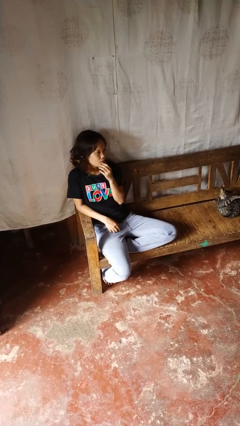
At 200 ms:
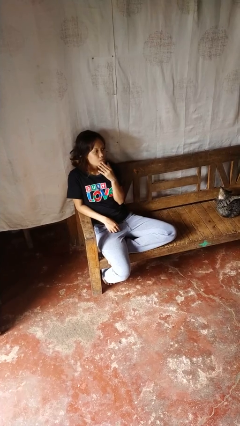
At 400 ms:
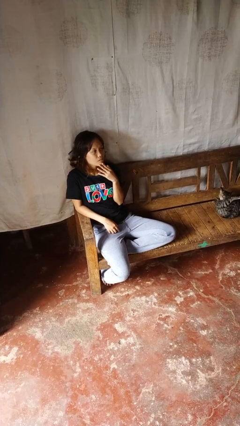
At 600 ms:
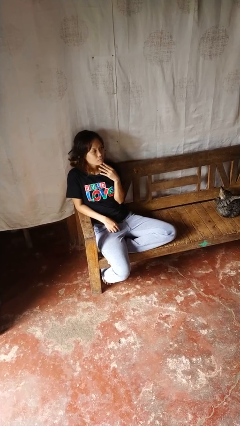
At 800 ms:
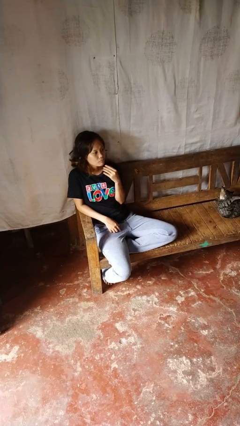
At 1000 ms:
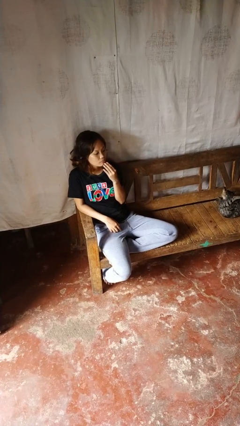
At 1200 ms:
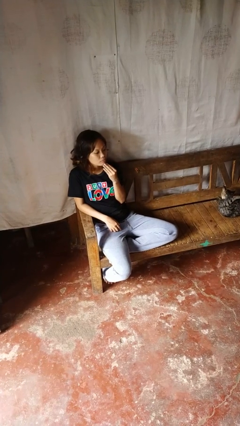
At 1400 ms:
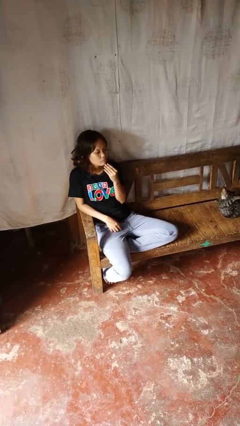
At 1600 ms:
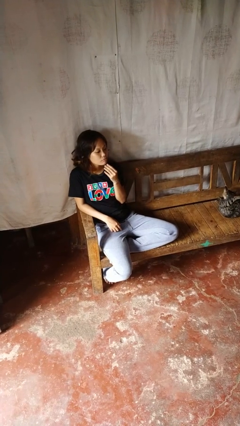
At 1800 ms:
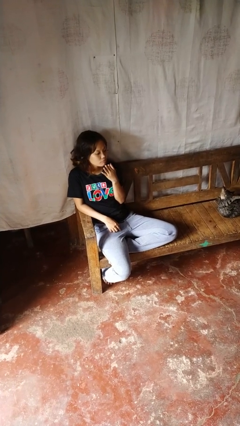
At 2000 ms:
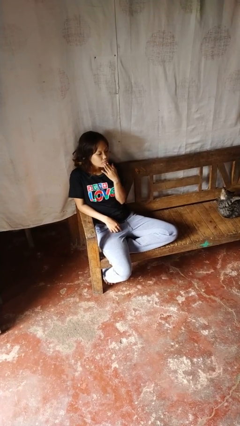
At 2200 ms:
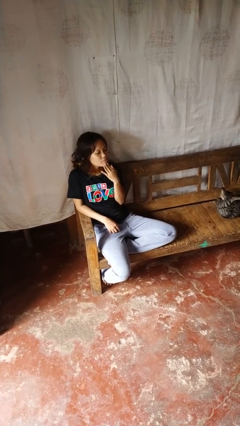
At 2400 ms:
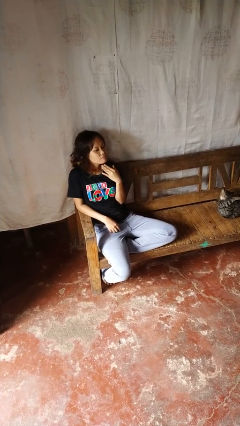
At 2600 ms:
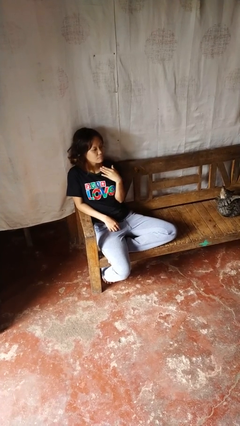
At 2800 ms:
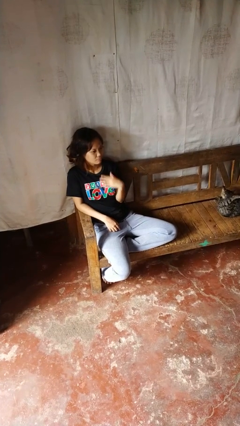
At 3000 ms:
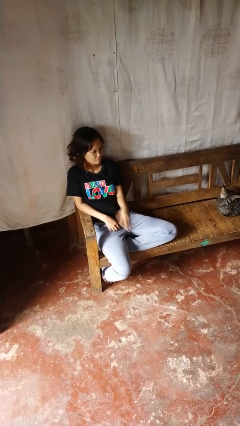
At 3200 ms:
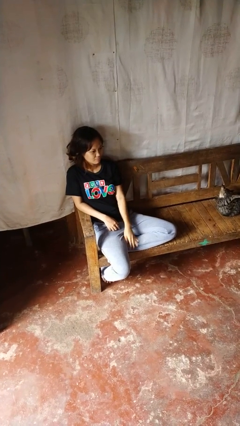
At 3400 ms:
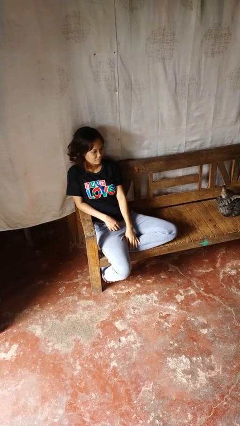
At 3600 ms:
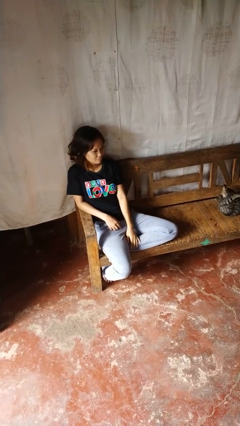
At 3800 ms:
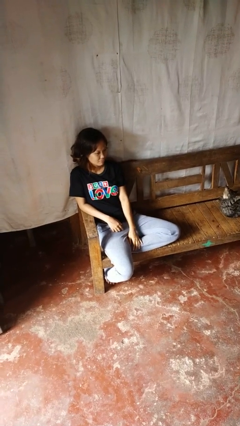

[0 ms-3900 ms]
person strokes chin

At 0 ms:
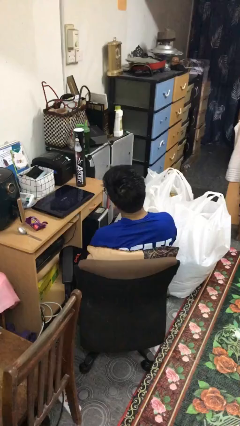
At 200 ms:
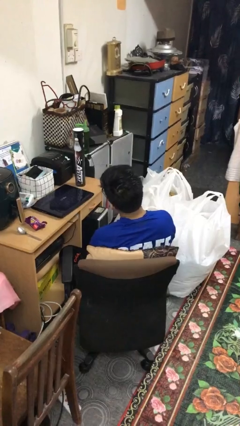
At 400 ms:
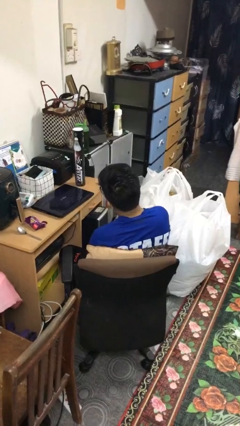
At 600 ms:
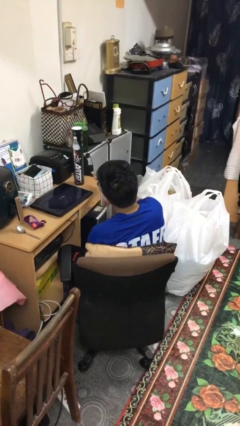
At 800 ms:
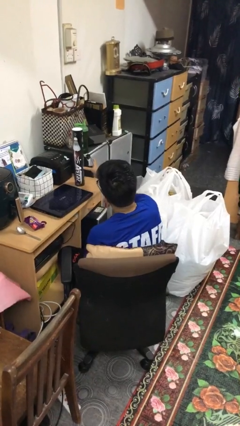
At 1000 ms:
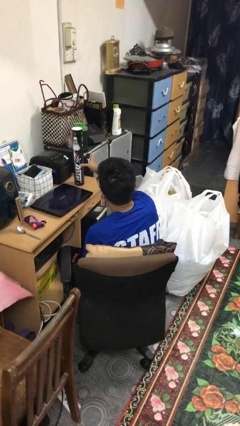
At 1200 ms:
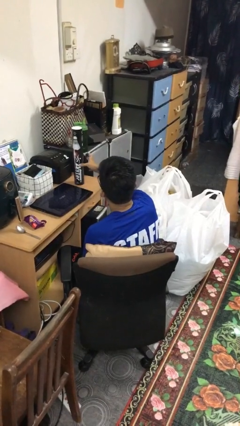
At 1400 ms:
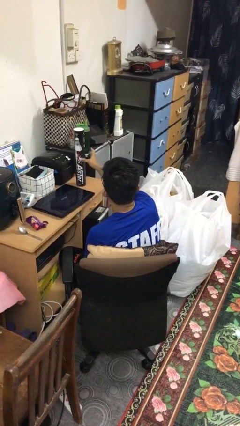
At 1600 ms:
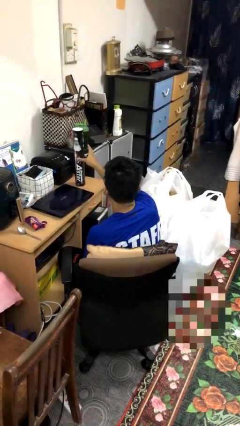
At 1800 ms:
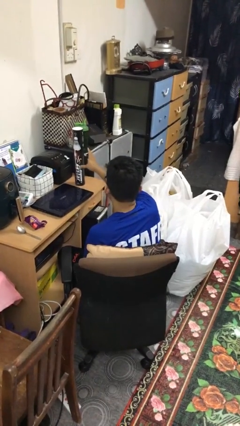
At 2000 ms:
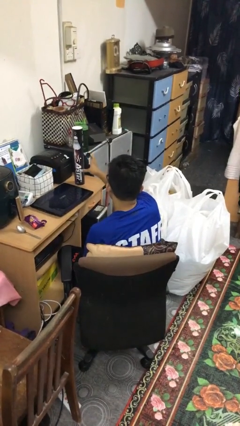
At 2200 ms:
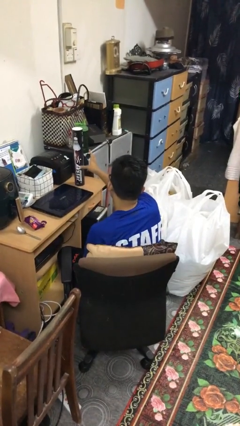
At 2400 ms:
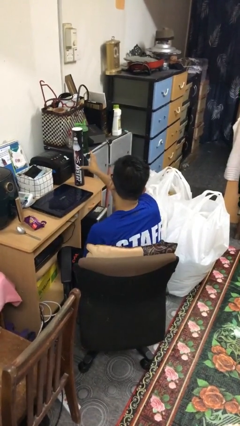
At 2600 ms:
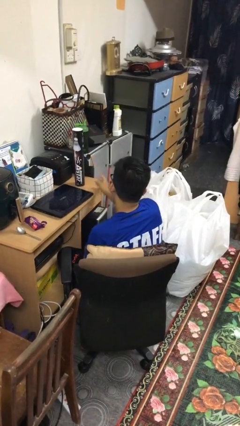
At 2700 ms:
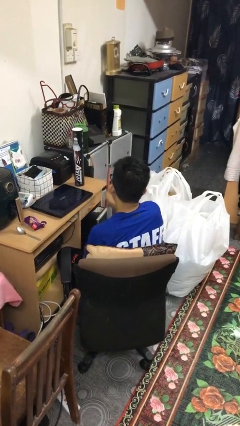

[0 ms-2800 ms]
person waves hand over object

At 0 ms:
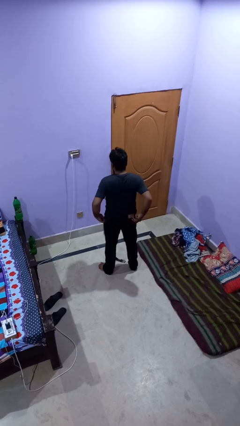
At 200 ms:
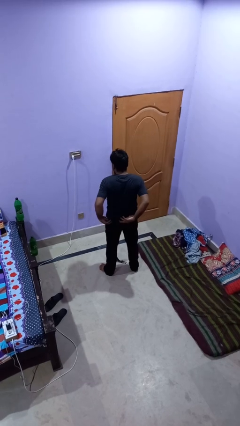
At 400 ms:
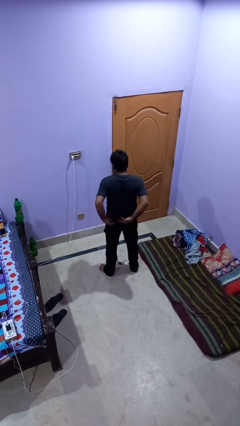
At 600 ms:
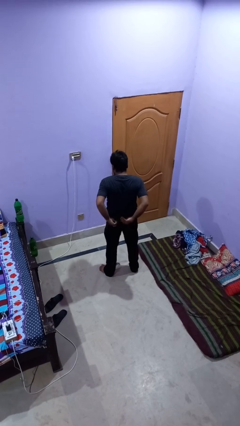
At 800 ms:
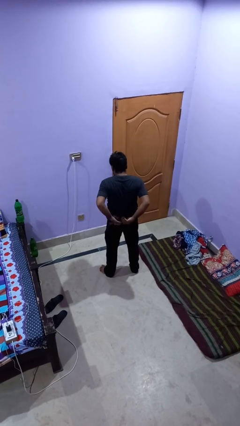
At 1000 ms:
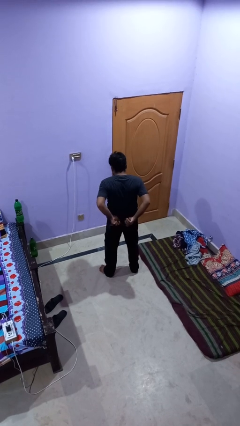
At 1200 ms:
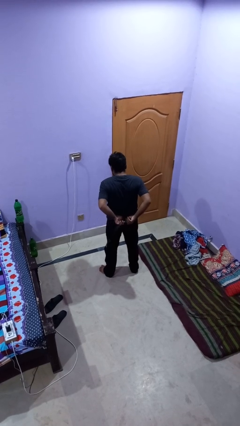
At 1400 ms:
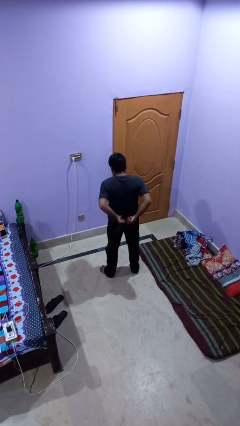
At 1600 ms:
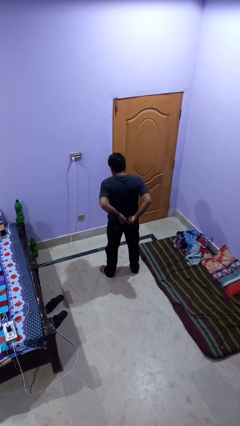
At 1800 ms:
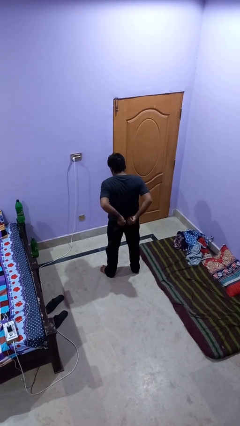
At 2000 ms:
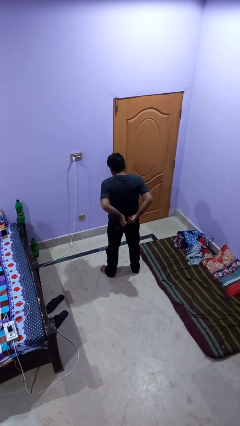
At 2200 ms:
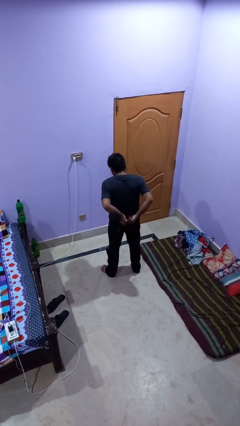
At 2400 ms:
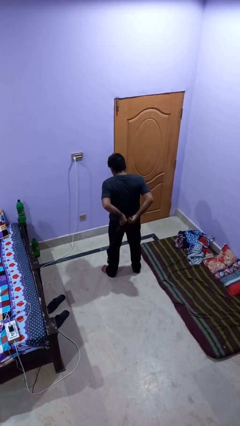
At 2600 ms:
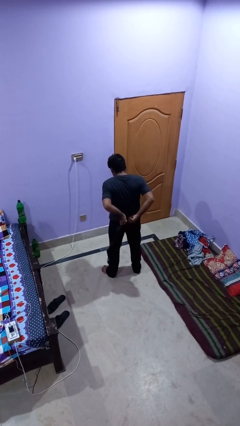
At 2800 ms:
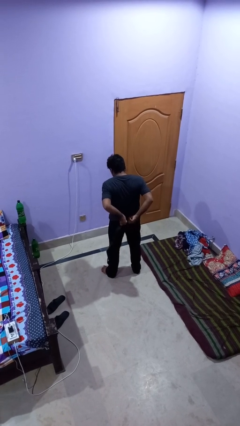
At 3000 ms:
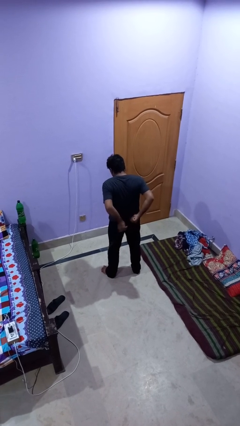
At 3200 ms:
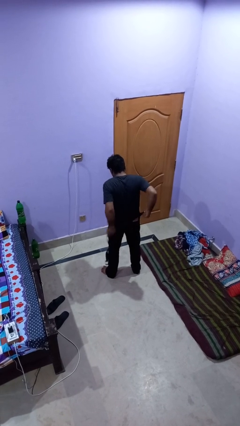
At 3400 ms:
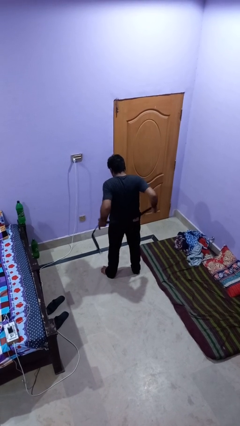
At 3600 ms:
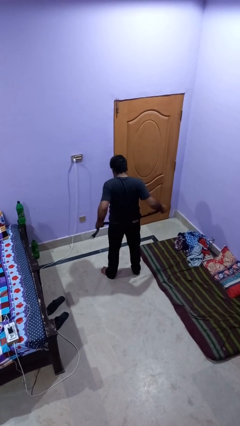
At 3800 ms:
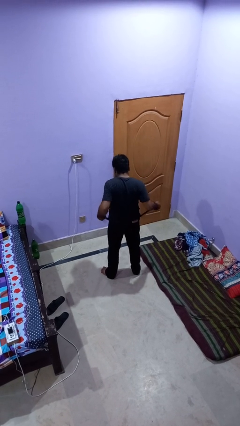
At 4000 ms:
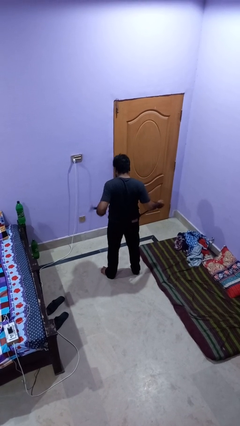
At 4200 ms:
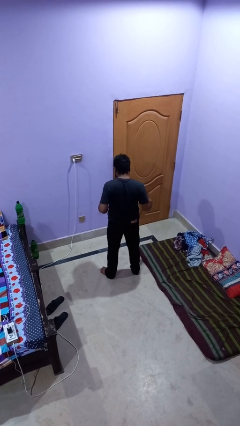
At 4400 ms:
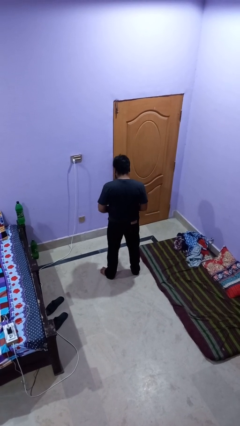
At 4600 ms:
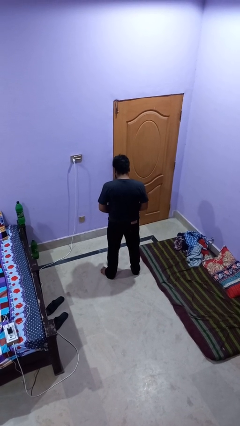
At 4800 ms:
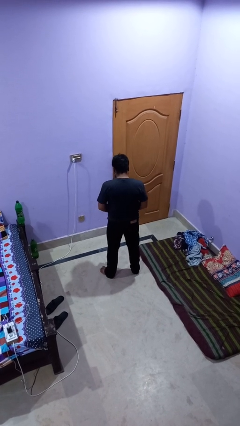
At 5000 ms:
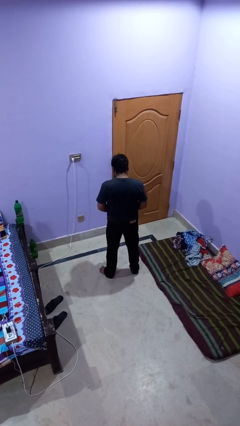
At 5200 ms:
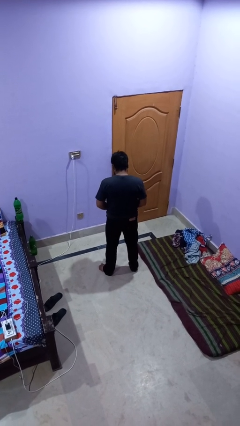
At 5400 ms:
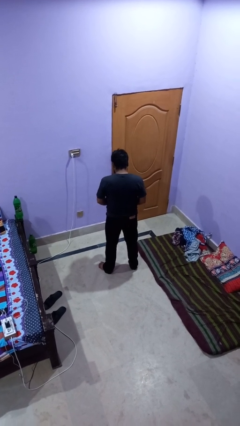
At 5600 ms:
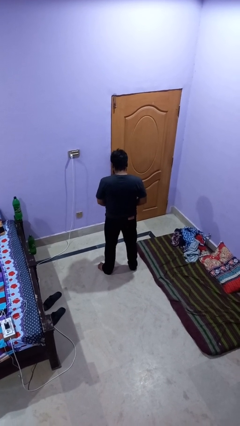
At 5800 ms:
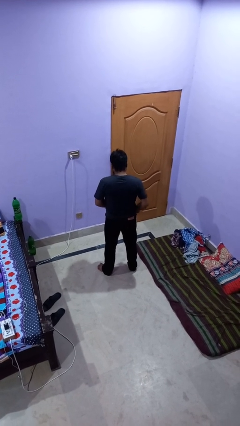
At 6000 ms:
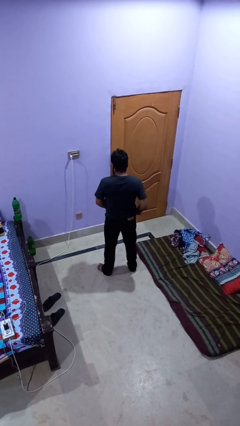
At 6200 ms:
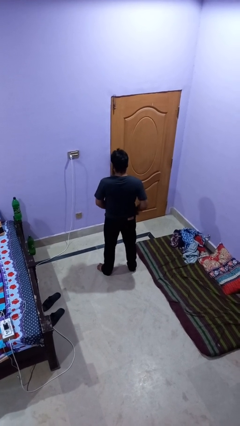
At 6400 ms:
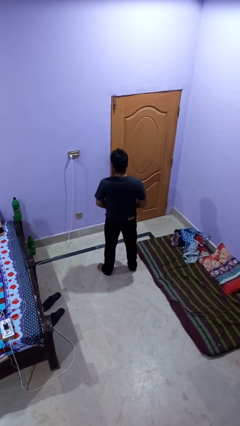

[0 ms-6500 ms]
person puts on belt

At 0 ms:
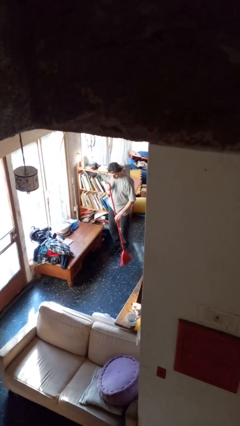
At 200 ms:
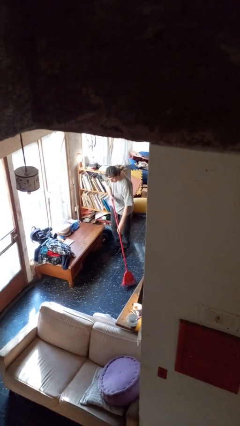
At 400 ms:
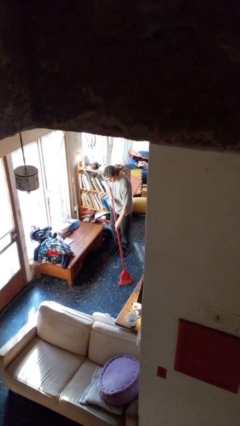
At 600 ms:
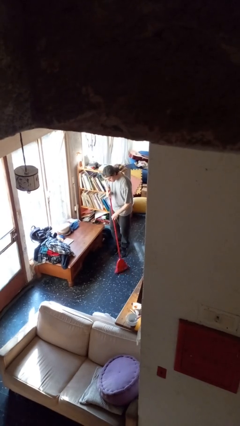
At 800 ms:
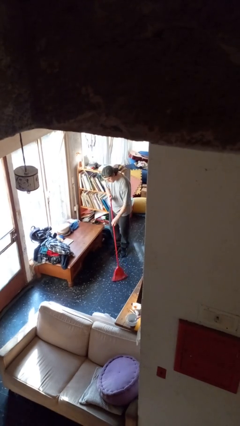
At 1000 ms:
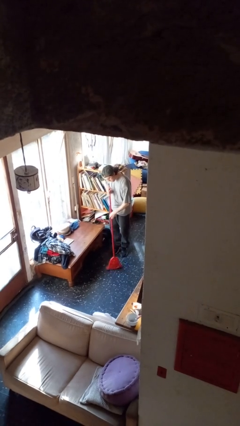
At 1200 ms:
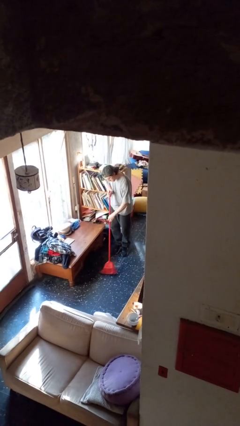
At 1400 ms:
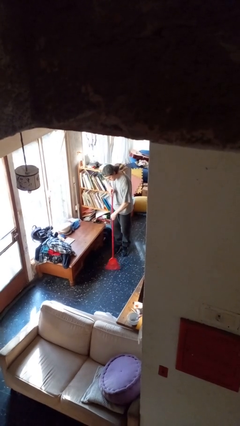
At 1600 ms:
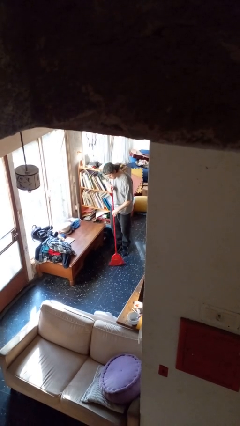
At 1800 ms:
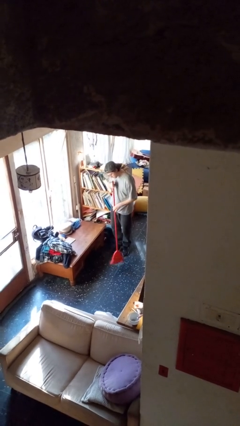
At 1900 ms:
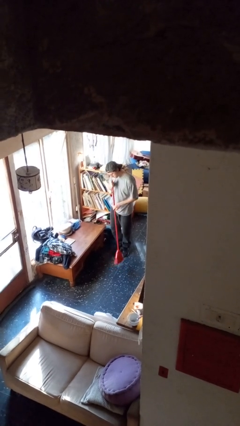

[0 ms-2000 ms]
person sweeps floor

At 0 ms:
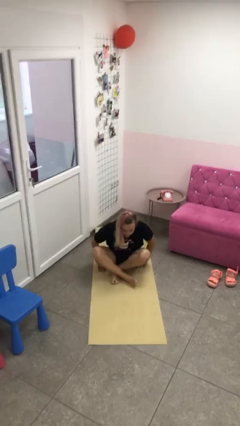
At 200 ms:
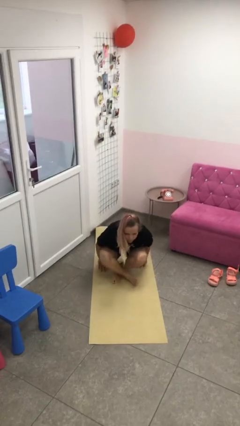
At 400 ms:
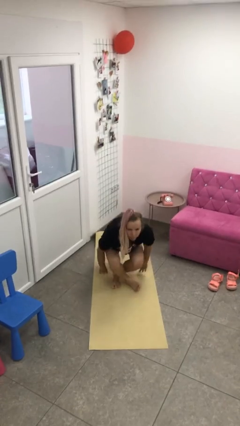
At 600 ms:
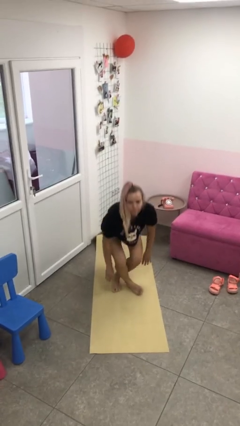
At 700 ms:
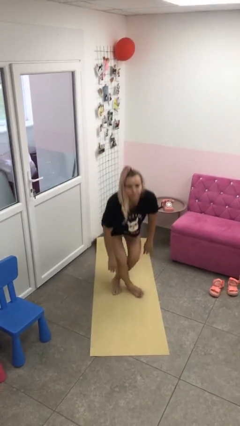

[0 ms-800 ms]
person stands up from floor

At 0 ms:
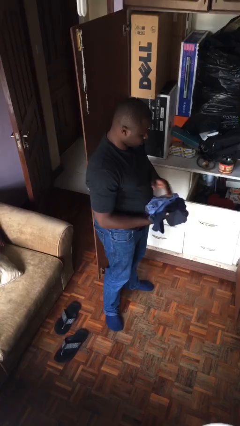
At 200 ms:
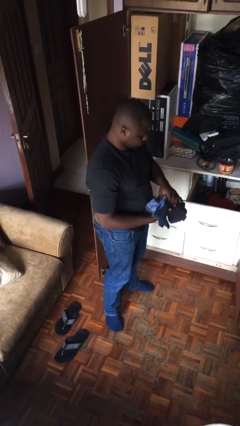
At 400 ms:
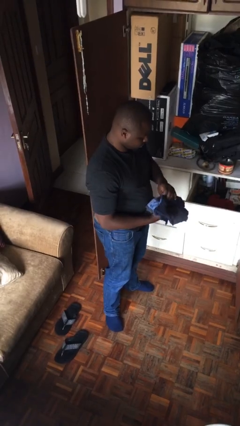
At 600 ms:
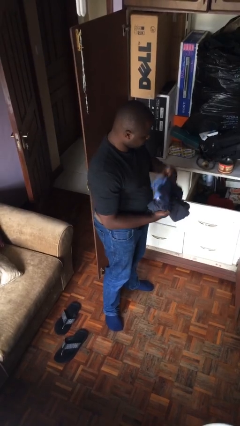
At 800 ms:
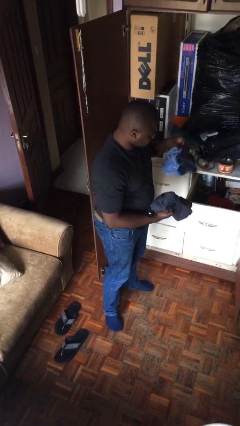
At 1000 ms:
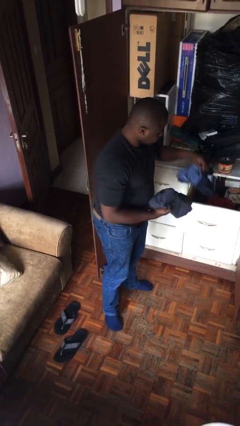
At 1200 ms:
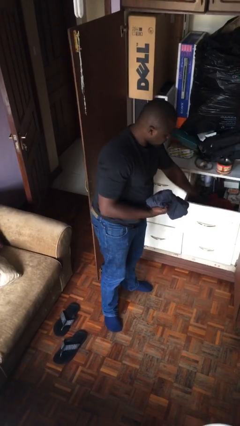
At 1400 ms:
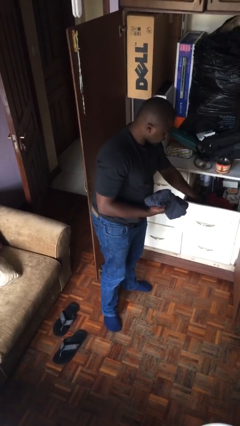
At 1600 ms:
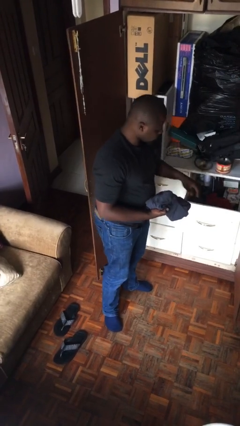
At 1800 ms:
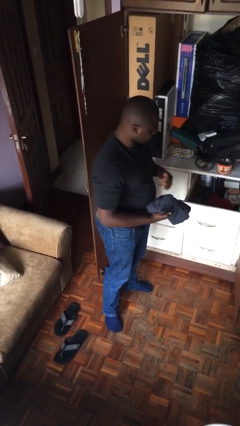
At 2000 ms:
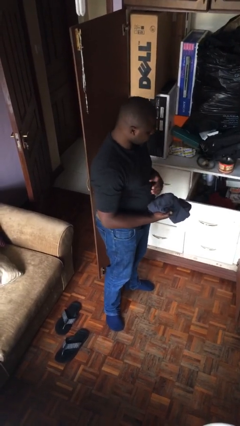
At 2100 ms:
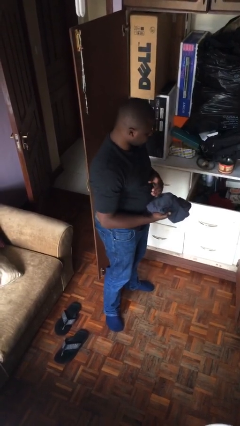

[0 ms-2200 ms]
person puts clothes into dresser
